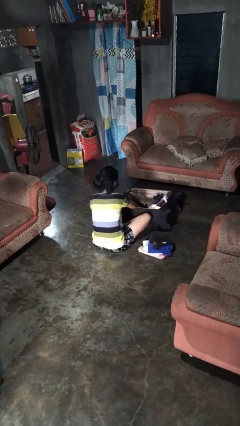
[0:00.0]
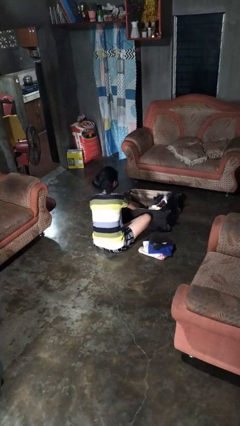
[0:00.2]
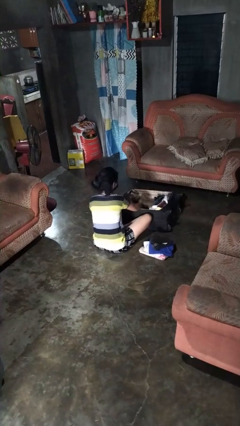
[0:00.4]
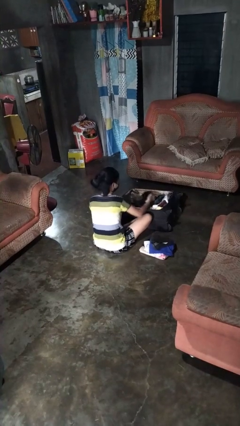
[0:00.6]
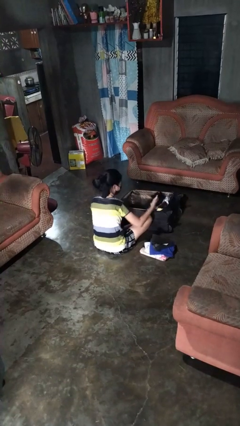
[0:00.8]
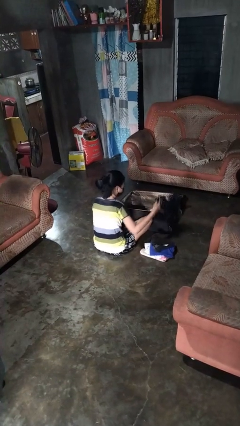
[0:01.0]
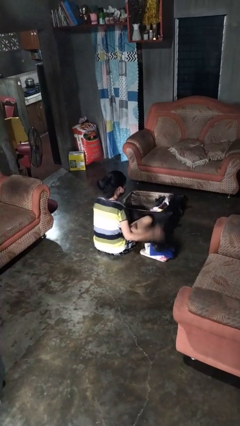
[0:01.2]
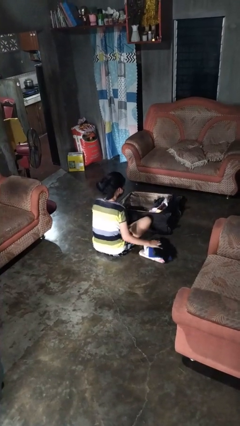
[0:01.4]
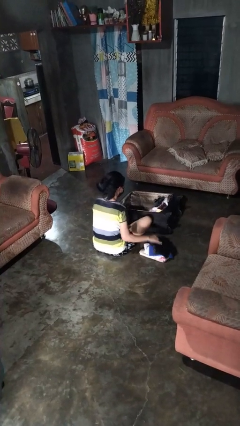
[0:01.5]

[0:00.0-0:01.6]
person unloads clothes from suitcase

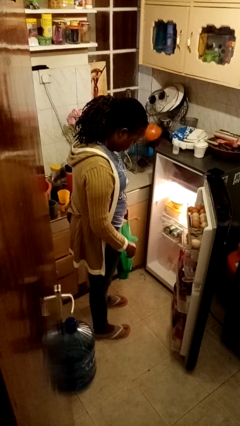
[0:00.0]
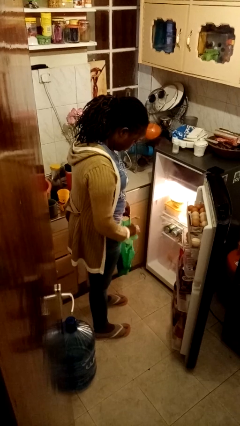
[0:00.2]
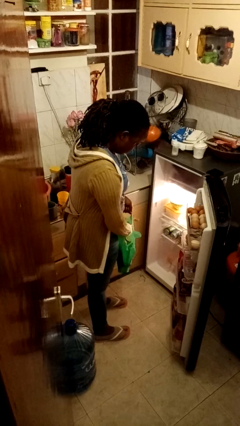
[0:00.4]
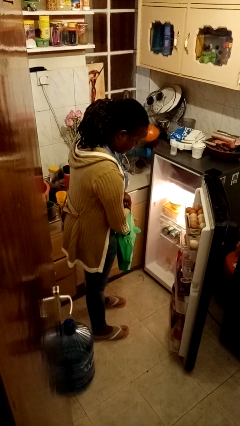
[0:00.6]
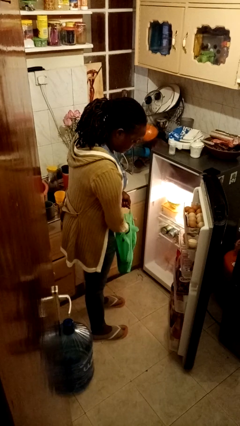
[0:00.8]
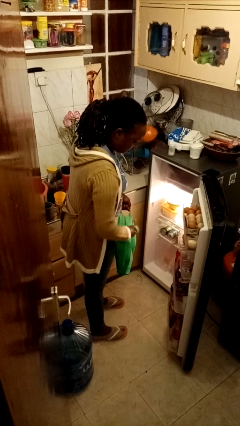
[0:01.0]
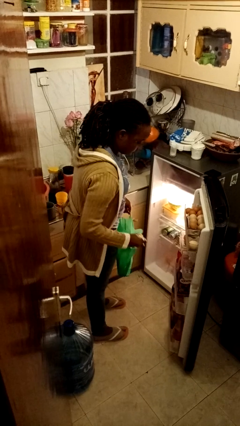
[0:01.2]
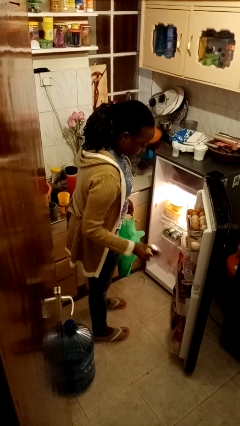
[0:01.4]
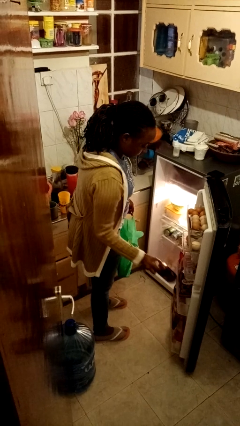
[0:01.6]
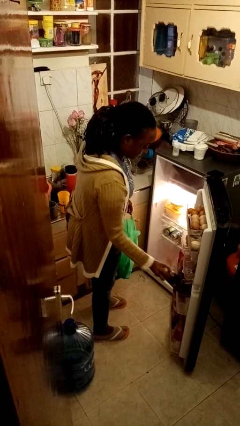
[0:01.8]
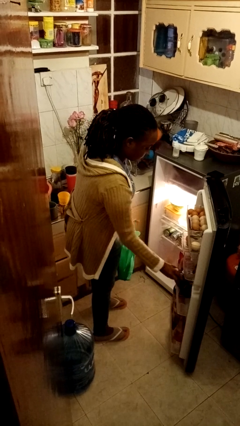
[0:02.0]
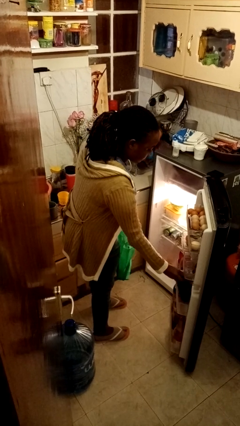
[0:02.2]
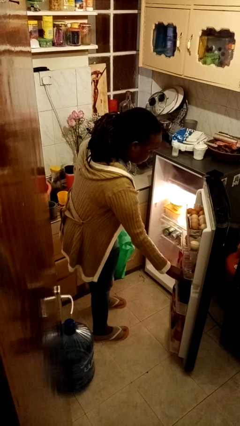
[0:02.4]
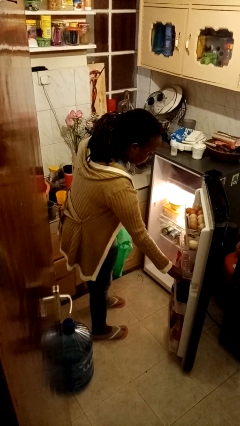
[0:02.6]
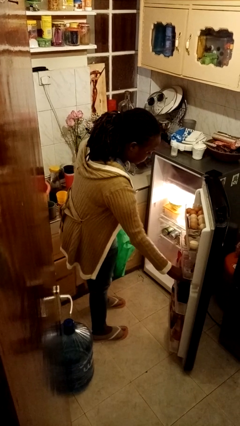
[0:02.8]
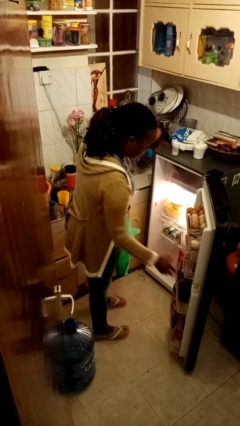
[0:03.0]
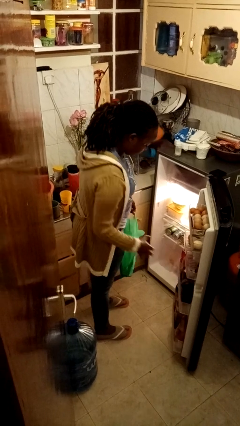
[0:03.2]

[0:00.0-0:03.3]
person loads groceries into refrigerator

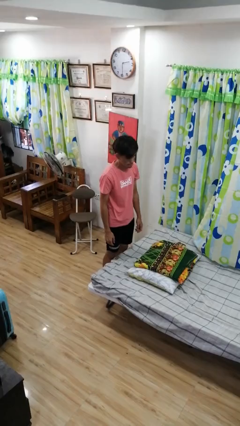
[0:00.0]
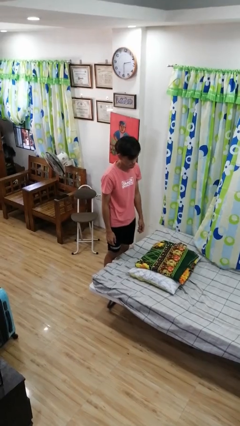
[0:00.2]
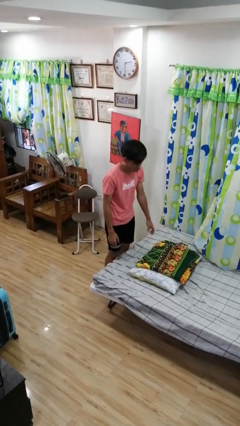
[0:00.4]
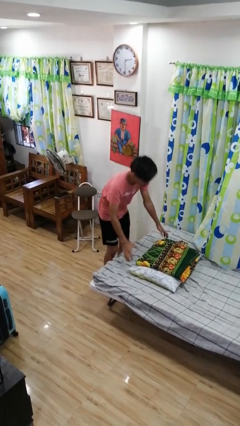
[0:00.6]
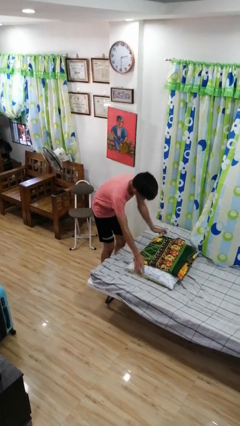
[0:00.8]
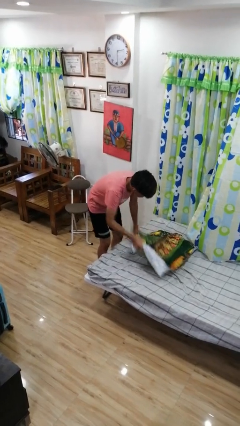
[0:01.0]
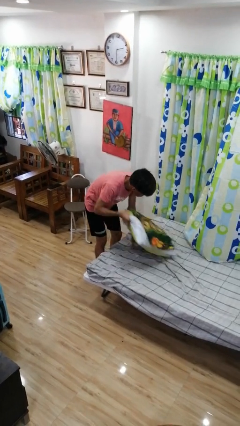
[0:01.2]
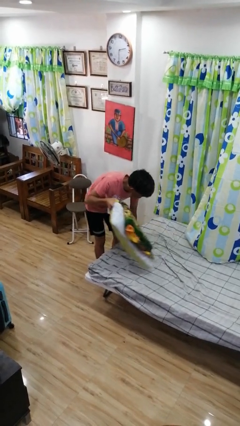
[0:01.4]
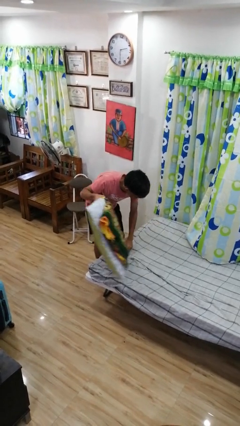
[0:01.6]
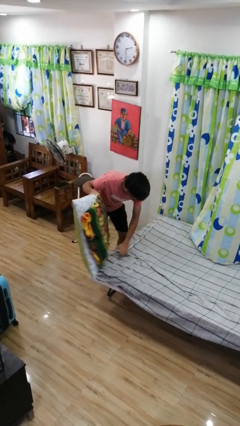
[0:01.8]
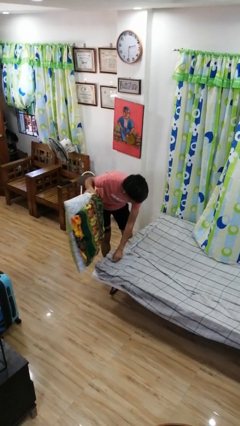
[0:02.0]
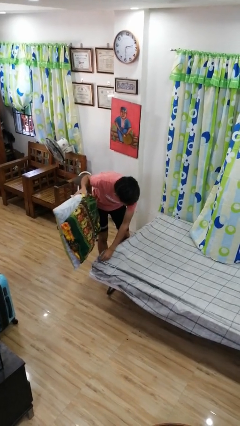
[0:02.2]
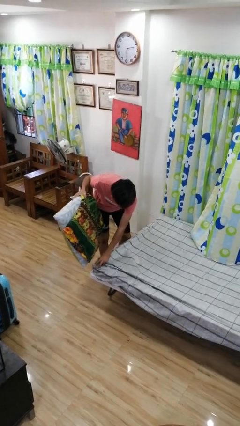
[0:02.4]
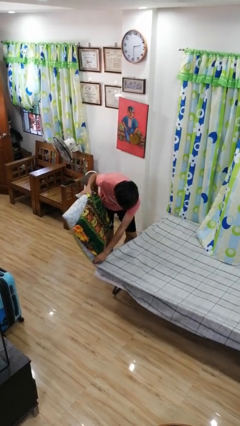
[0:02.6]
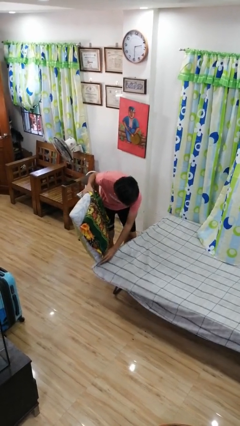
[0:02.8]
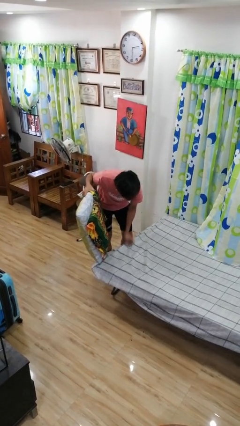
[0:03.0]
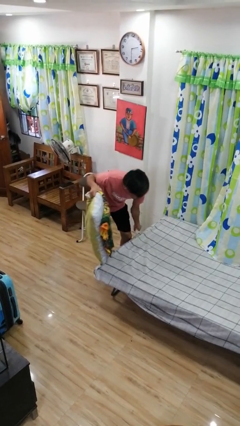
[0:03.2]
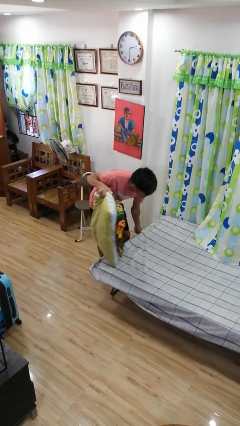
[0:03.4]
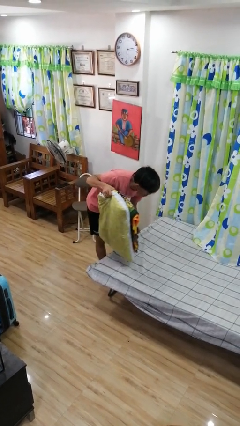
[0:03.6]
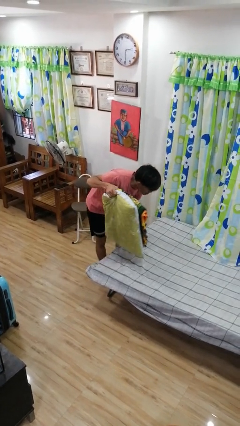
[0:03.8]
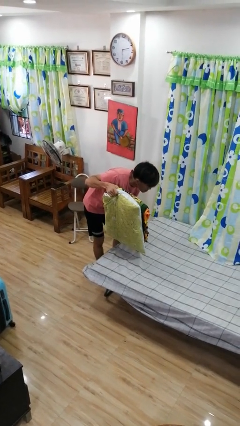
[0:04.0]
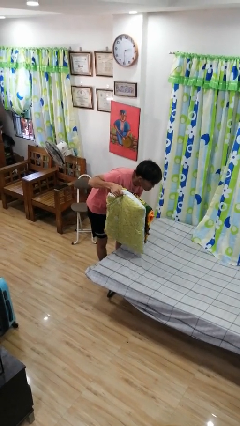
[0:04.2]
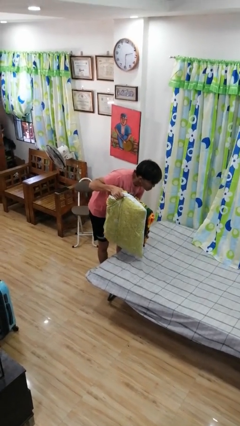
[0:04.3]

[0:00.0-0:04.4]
person makes bed

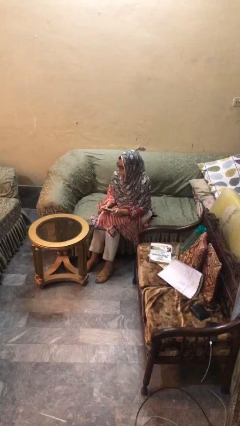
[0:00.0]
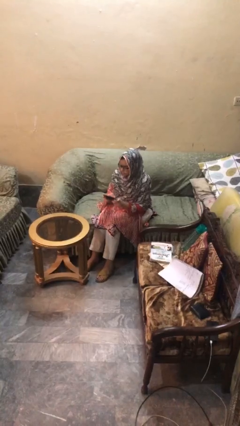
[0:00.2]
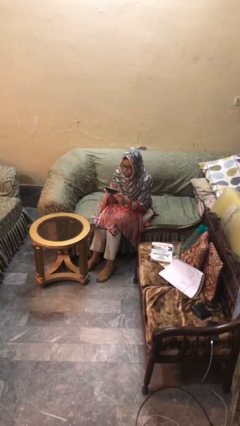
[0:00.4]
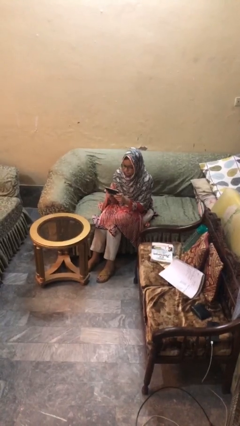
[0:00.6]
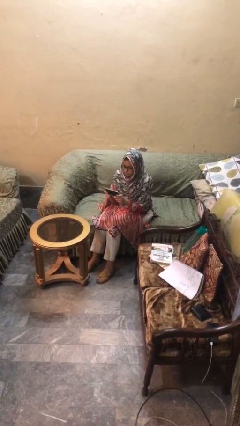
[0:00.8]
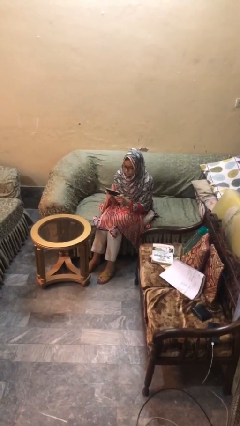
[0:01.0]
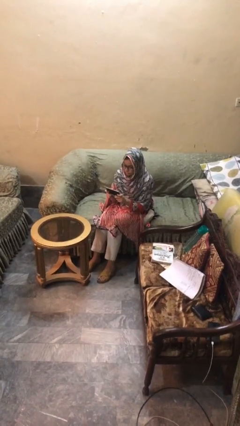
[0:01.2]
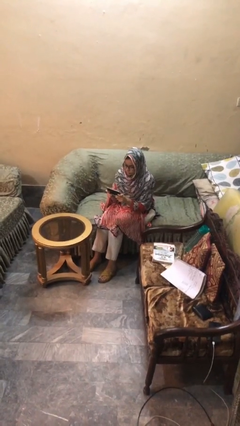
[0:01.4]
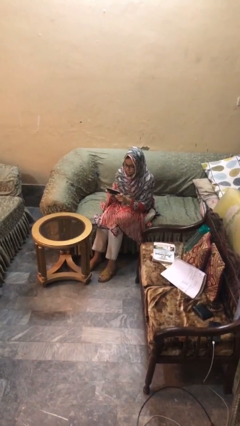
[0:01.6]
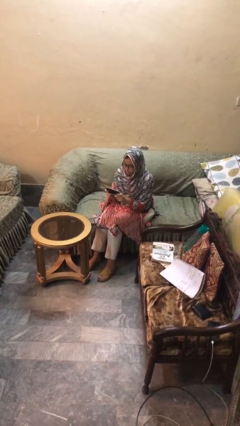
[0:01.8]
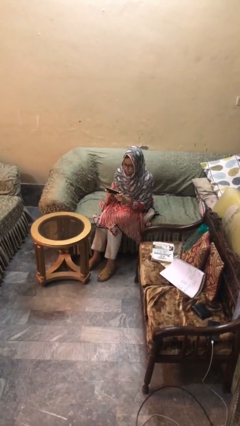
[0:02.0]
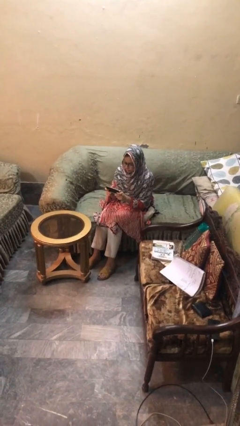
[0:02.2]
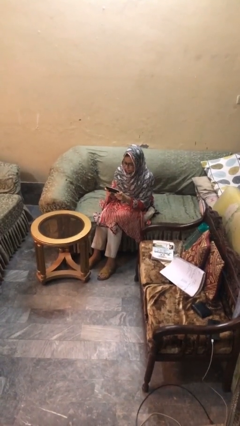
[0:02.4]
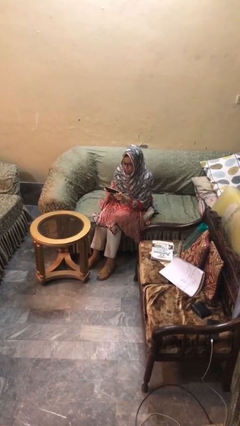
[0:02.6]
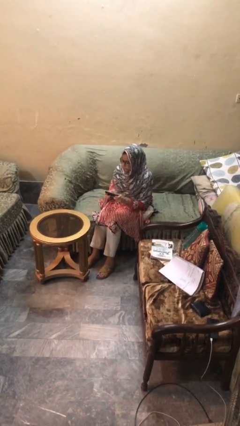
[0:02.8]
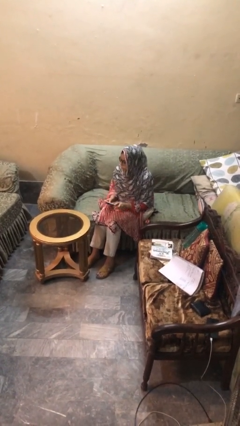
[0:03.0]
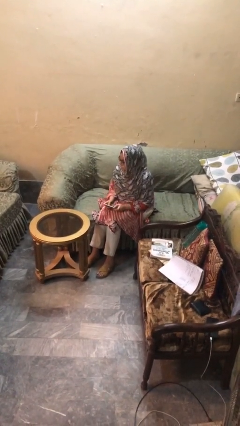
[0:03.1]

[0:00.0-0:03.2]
person interacts with handheld game

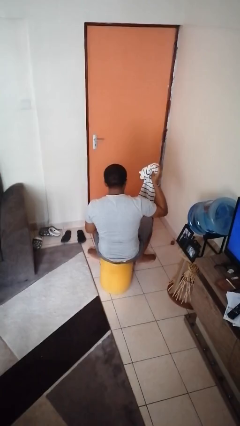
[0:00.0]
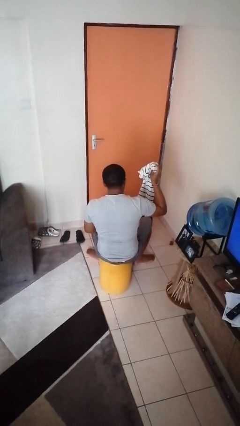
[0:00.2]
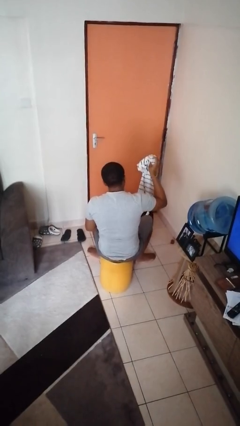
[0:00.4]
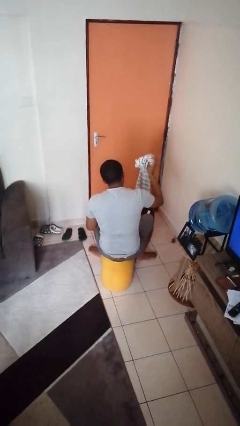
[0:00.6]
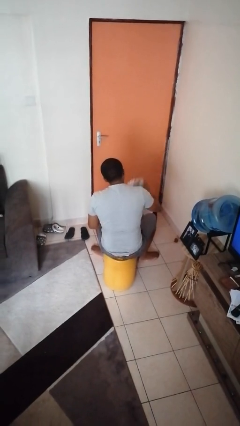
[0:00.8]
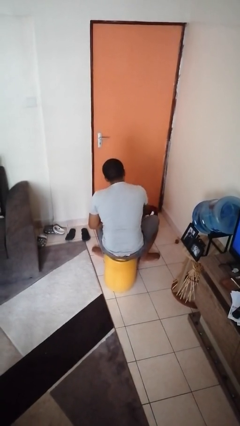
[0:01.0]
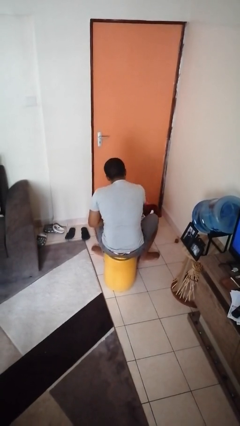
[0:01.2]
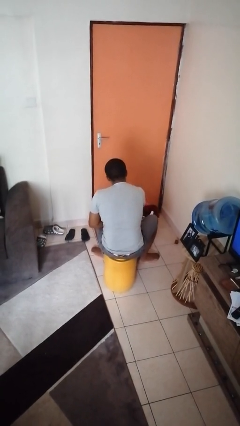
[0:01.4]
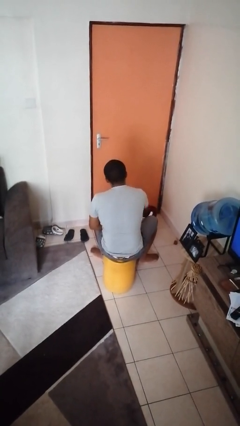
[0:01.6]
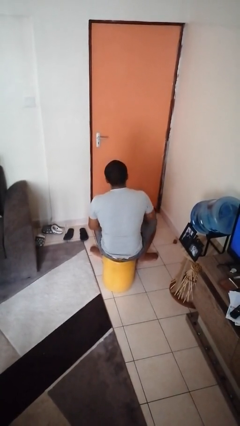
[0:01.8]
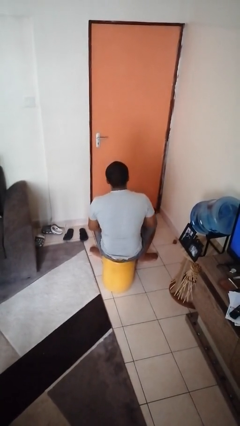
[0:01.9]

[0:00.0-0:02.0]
person puts object into basket

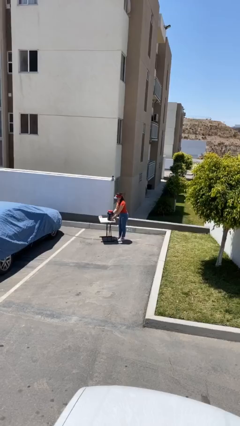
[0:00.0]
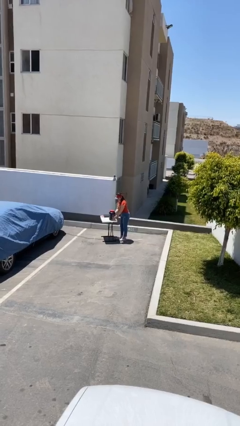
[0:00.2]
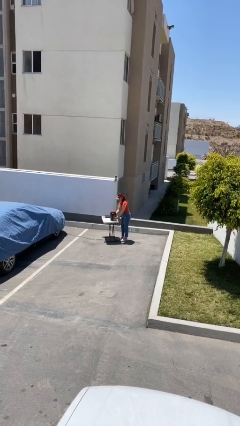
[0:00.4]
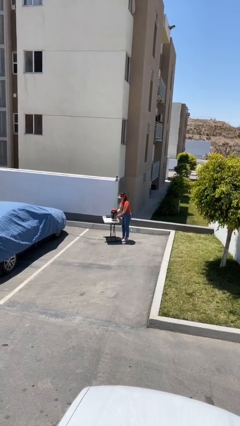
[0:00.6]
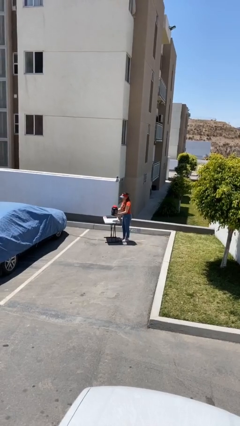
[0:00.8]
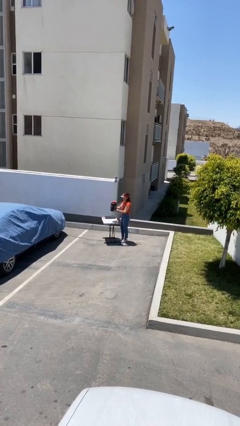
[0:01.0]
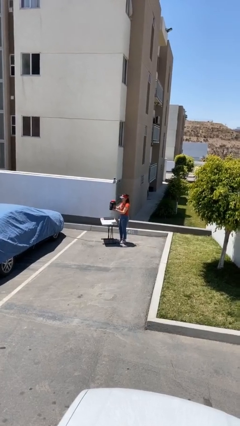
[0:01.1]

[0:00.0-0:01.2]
person picks up object from table

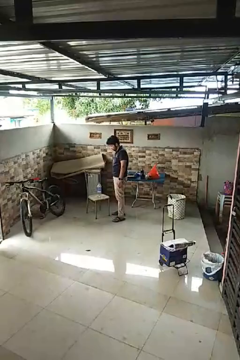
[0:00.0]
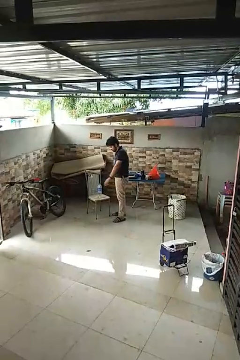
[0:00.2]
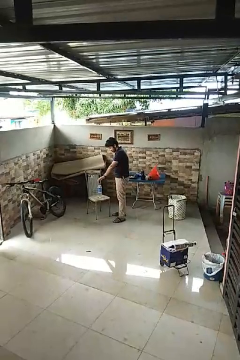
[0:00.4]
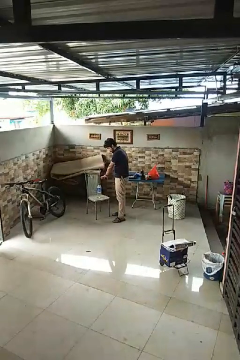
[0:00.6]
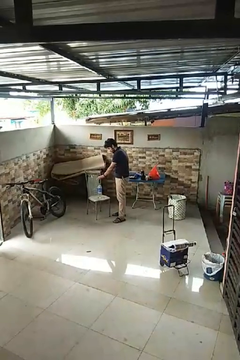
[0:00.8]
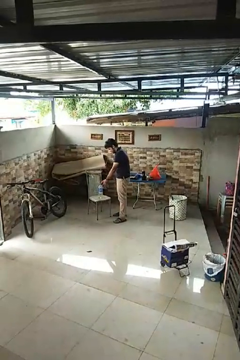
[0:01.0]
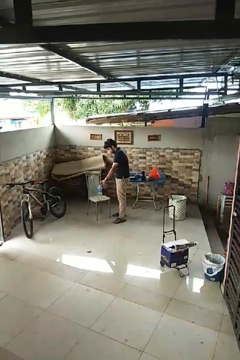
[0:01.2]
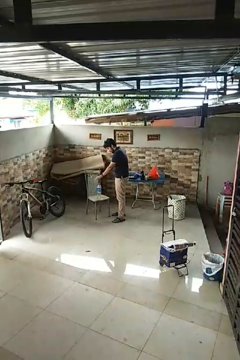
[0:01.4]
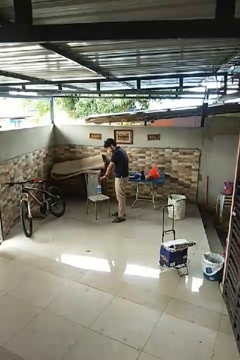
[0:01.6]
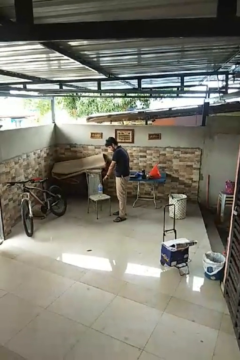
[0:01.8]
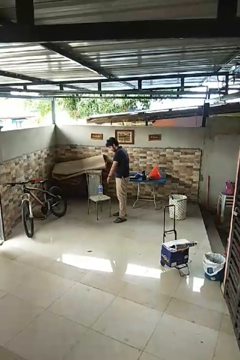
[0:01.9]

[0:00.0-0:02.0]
person waves hand over object

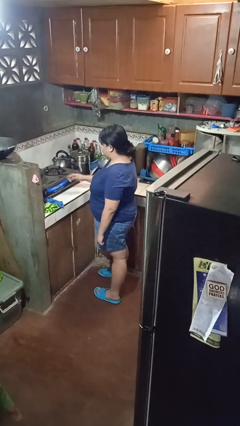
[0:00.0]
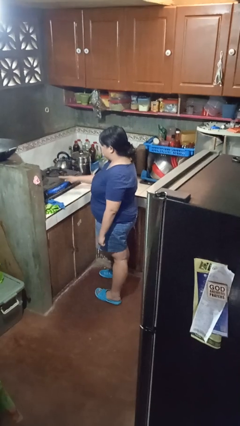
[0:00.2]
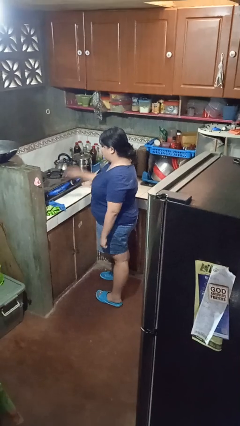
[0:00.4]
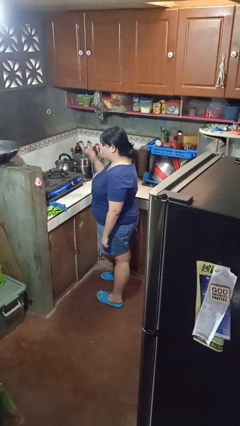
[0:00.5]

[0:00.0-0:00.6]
person burns hand
